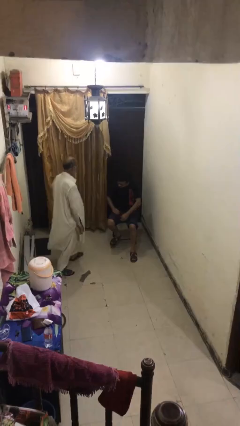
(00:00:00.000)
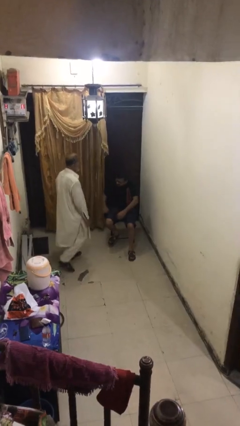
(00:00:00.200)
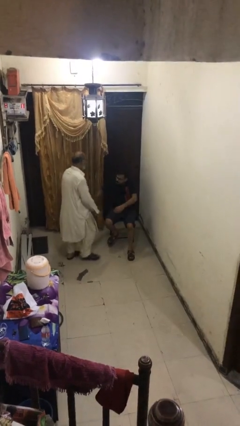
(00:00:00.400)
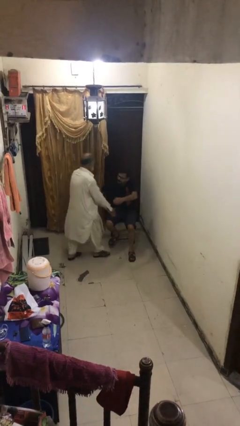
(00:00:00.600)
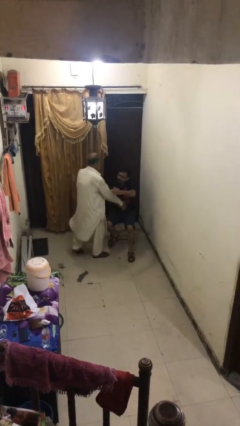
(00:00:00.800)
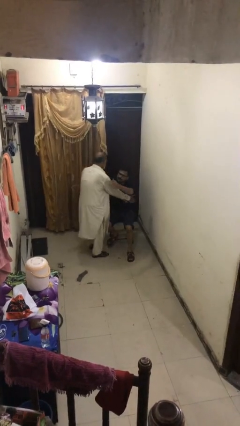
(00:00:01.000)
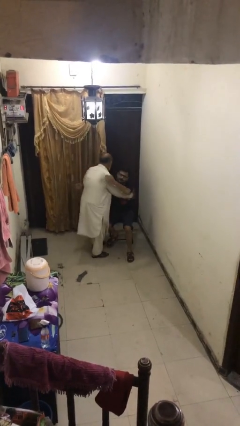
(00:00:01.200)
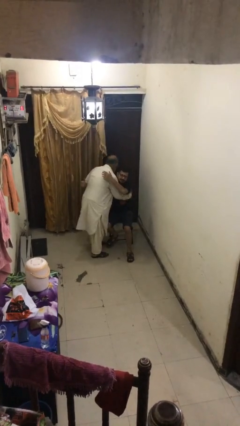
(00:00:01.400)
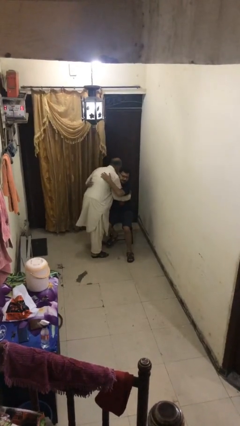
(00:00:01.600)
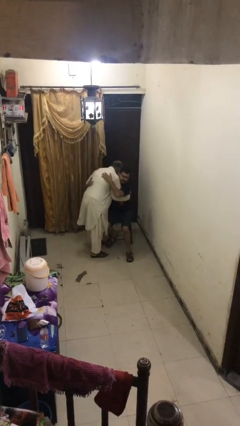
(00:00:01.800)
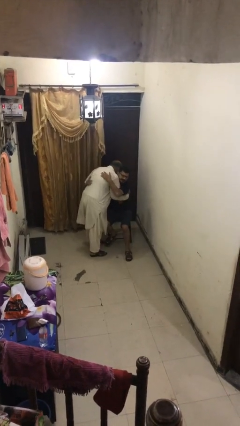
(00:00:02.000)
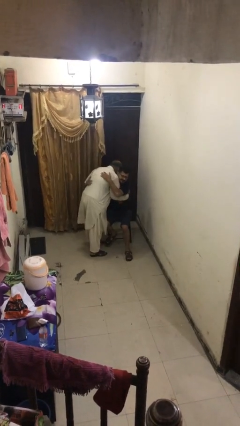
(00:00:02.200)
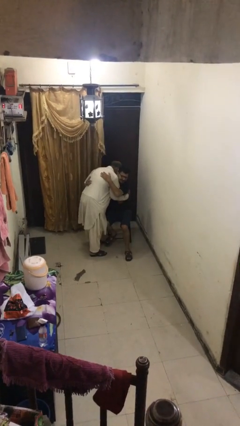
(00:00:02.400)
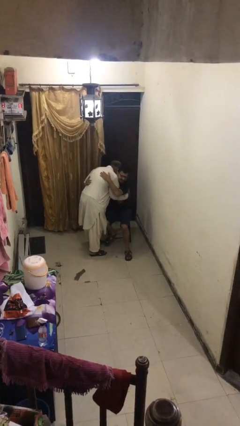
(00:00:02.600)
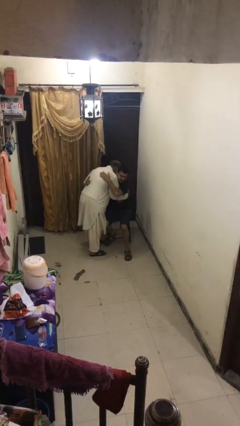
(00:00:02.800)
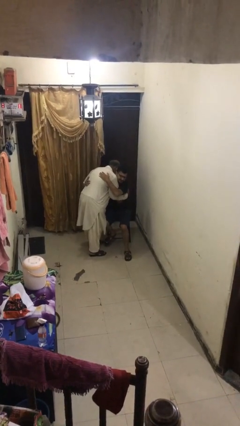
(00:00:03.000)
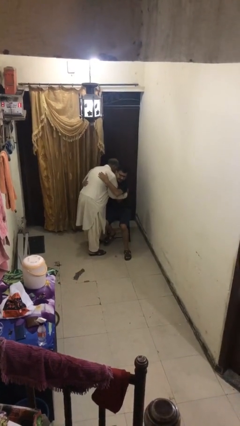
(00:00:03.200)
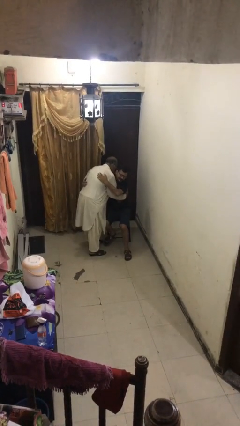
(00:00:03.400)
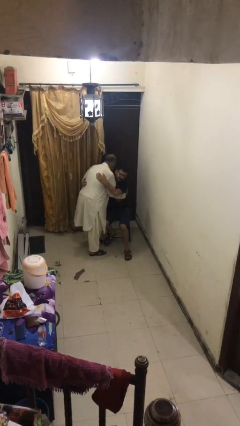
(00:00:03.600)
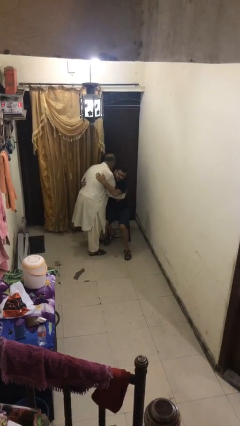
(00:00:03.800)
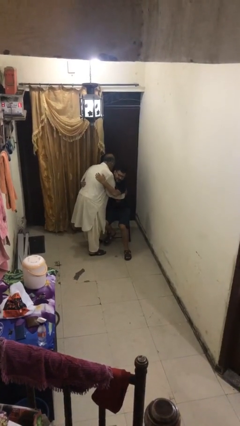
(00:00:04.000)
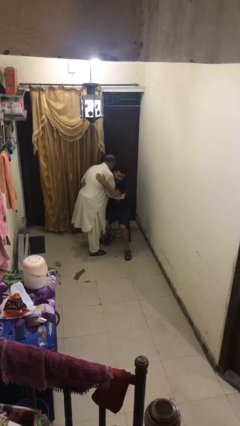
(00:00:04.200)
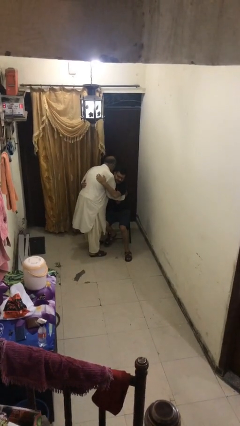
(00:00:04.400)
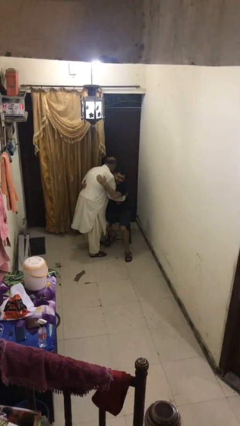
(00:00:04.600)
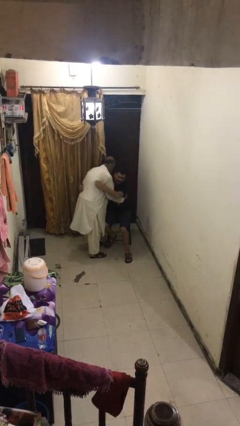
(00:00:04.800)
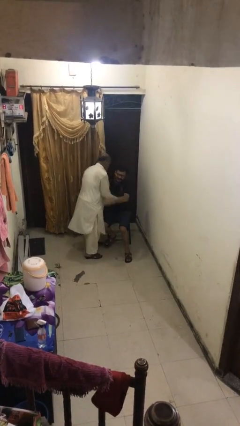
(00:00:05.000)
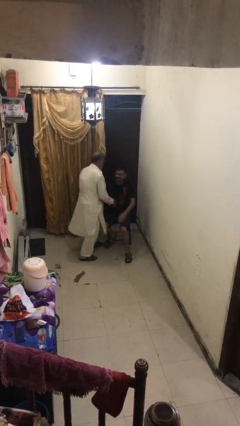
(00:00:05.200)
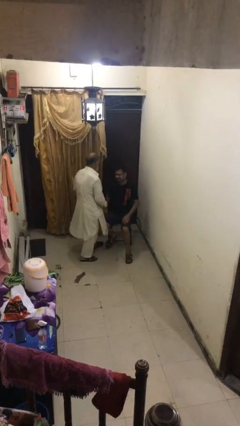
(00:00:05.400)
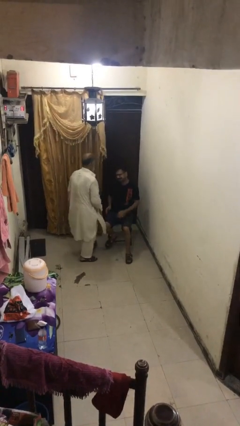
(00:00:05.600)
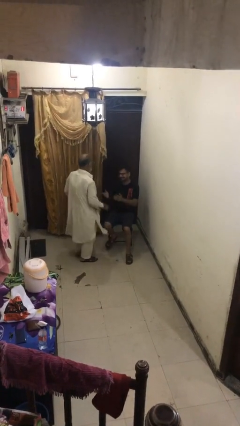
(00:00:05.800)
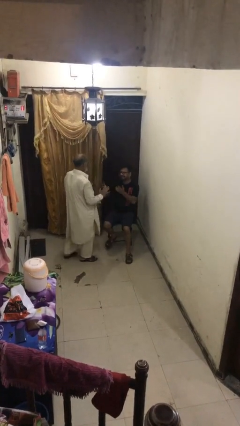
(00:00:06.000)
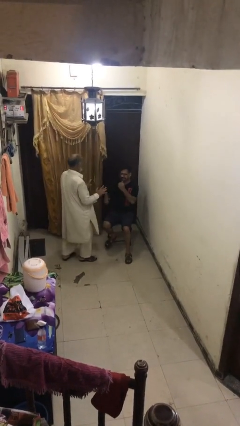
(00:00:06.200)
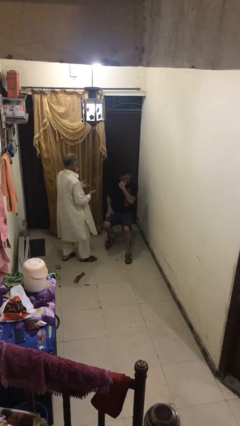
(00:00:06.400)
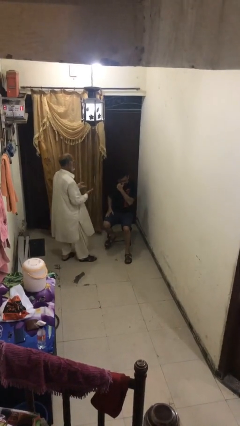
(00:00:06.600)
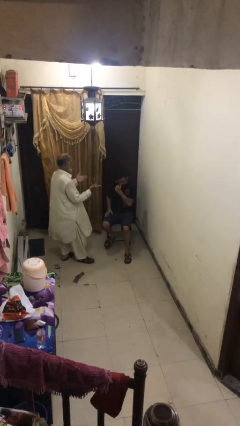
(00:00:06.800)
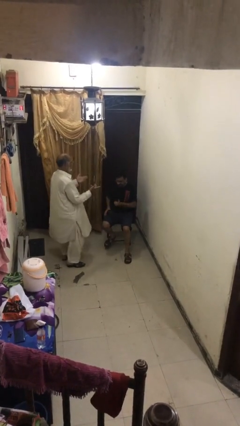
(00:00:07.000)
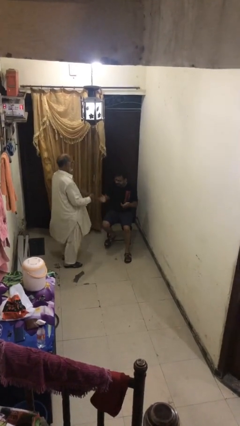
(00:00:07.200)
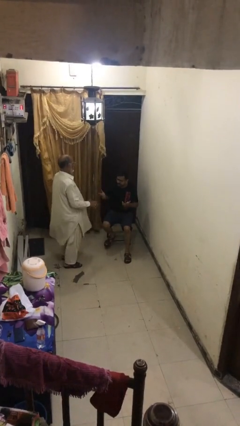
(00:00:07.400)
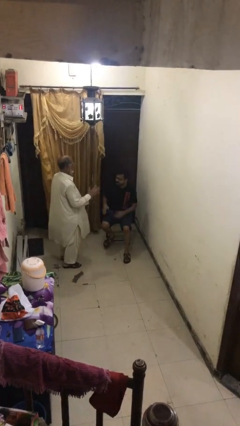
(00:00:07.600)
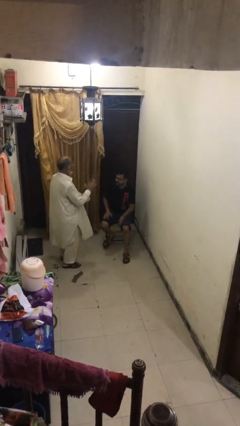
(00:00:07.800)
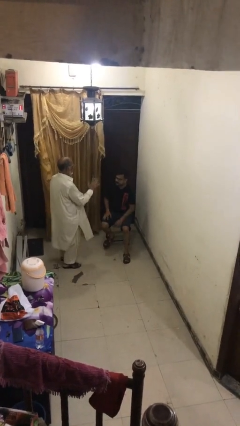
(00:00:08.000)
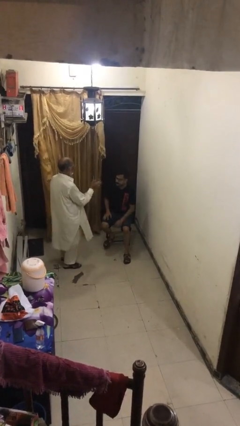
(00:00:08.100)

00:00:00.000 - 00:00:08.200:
person embraces person

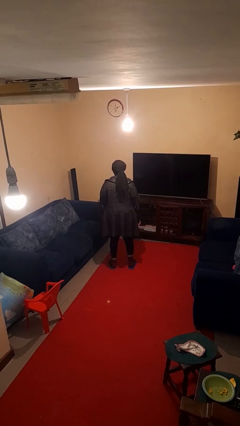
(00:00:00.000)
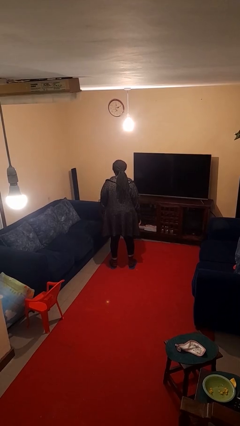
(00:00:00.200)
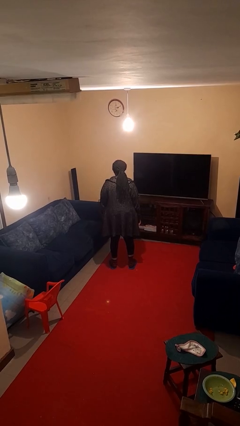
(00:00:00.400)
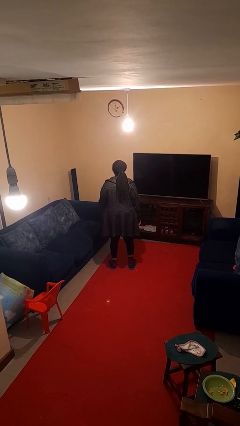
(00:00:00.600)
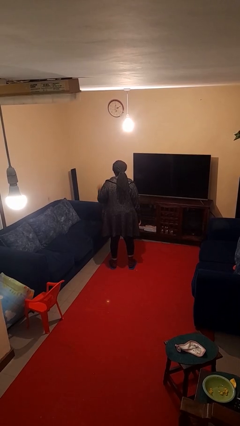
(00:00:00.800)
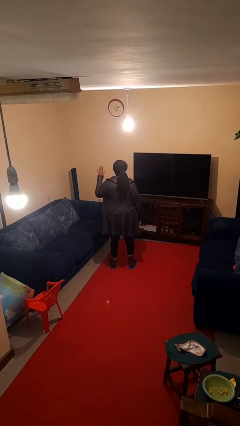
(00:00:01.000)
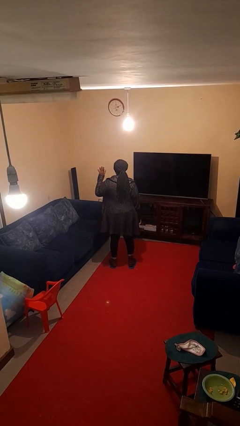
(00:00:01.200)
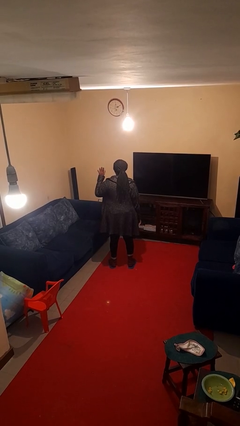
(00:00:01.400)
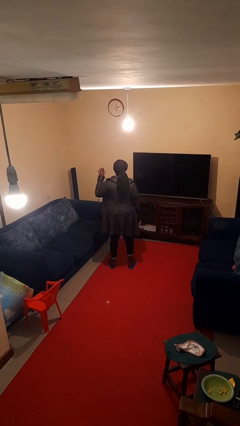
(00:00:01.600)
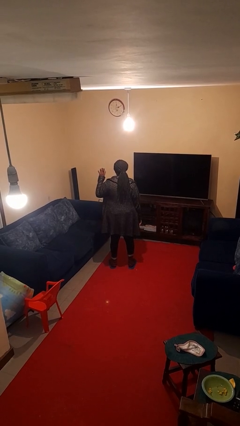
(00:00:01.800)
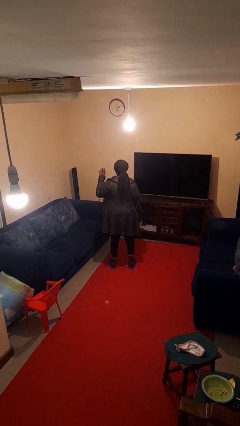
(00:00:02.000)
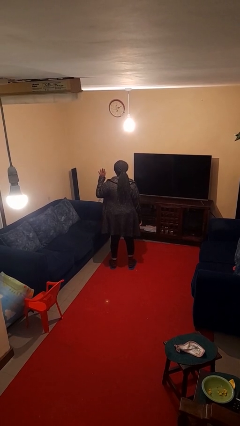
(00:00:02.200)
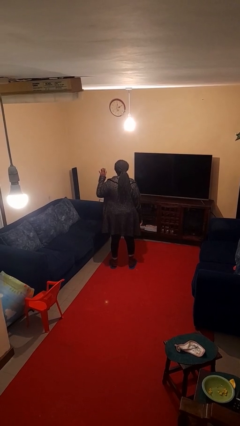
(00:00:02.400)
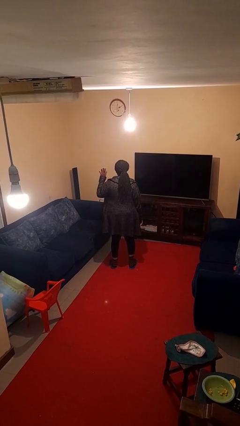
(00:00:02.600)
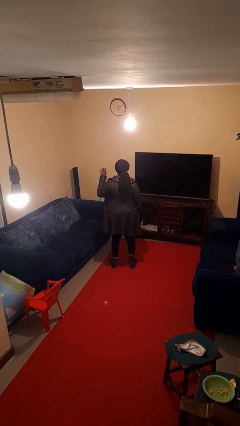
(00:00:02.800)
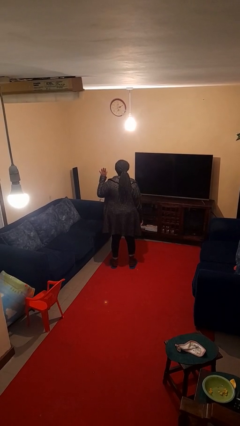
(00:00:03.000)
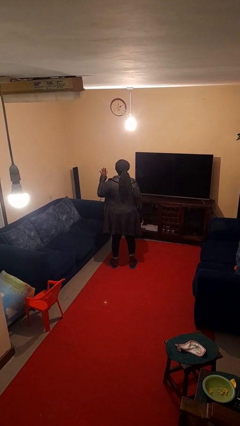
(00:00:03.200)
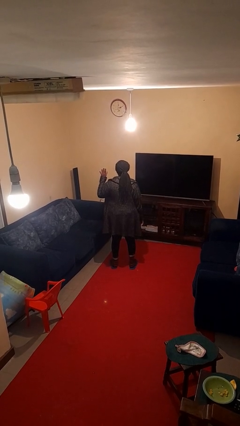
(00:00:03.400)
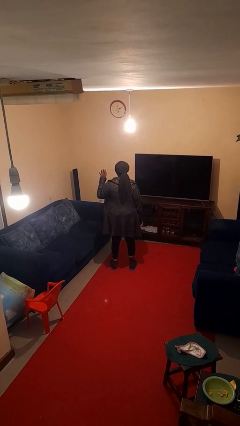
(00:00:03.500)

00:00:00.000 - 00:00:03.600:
person gestures number five

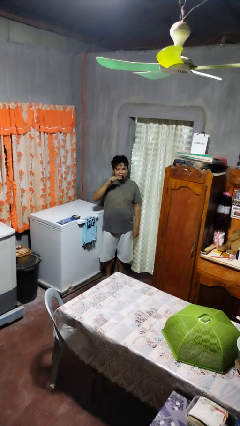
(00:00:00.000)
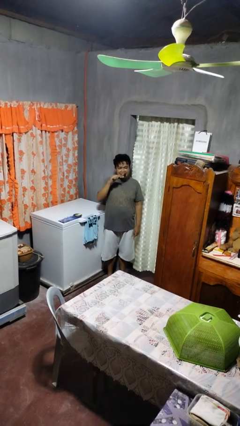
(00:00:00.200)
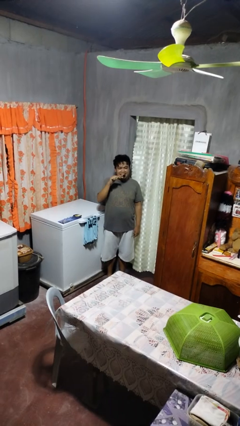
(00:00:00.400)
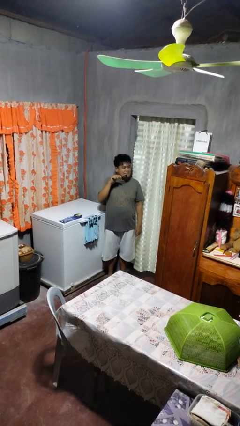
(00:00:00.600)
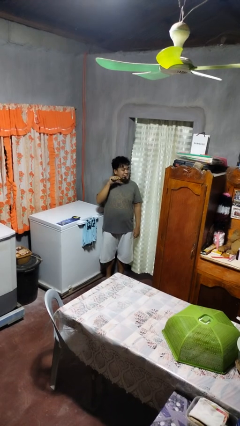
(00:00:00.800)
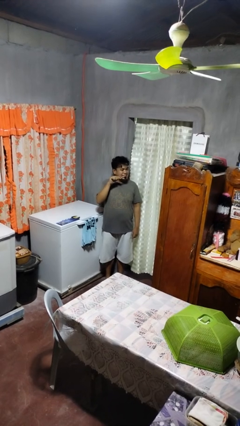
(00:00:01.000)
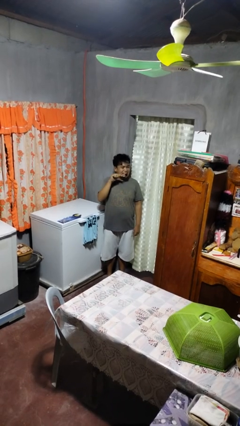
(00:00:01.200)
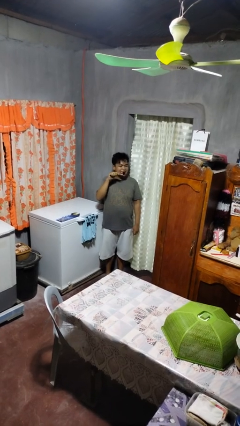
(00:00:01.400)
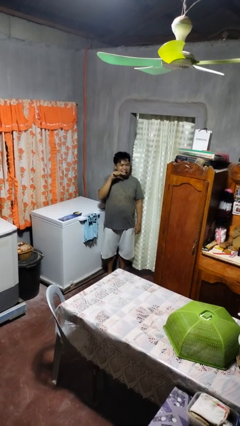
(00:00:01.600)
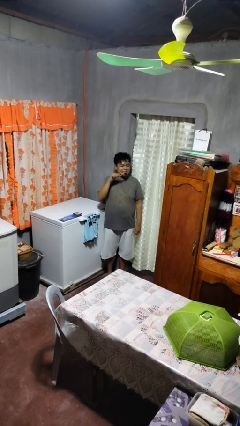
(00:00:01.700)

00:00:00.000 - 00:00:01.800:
person brushes teeth

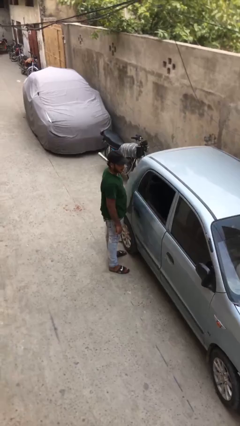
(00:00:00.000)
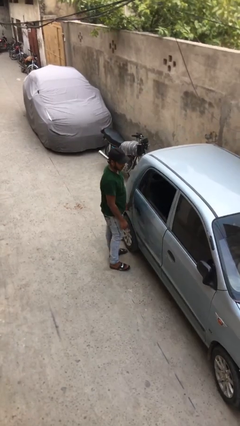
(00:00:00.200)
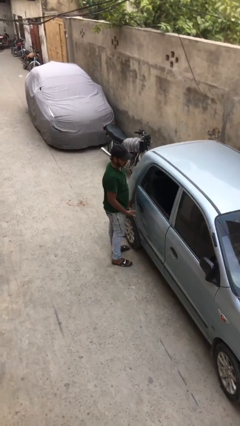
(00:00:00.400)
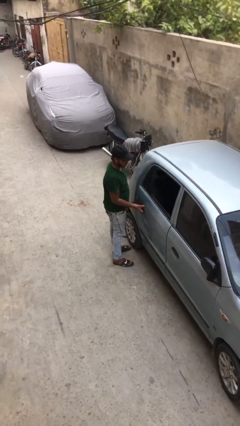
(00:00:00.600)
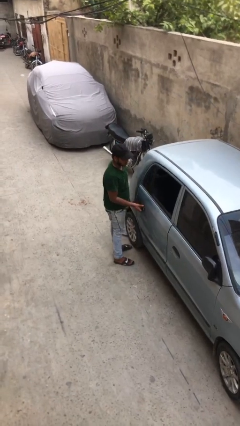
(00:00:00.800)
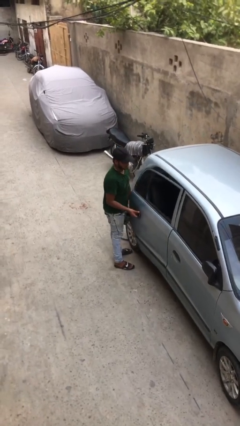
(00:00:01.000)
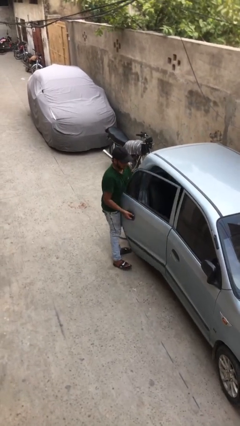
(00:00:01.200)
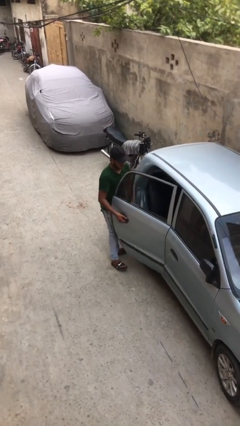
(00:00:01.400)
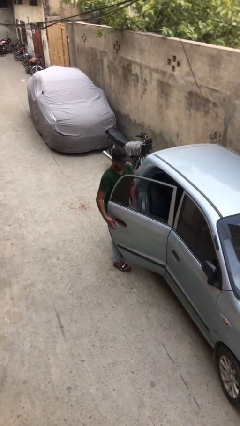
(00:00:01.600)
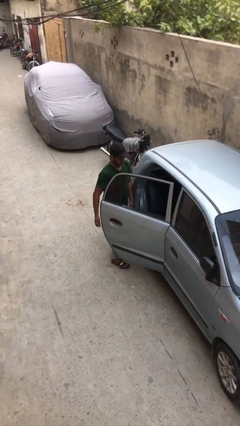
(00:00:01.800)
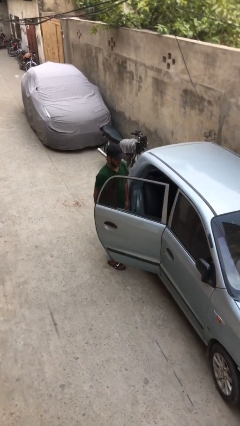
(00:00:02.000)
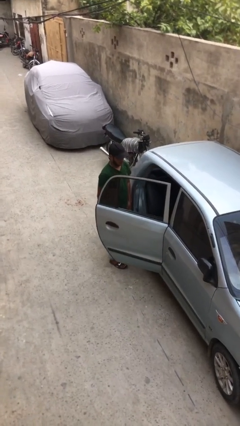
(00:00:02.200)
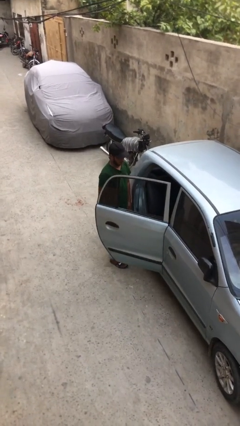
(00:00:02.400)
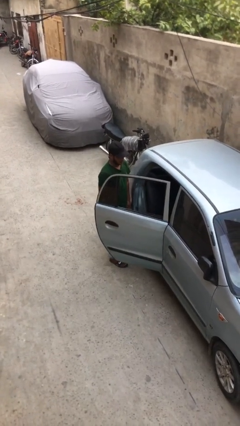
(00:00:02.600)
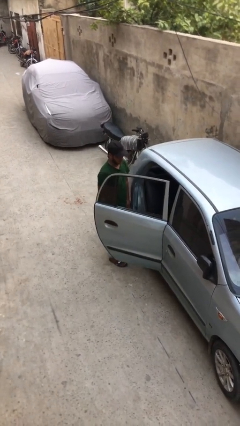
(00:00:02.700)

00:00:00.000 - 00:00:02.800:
person opens car door

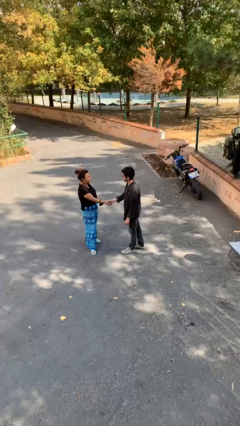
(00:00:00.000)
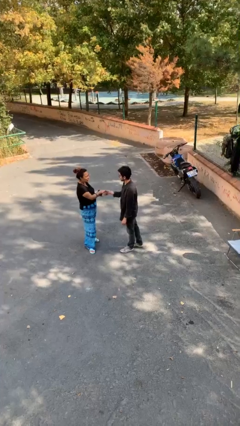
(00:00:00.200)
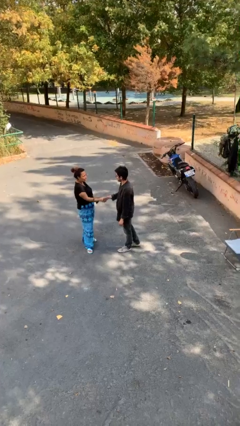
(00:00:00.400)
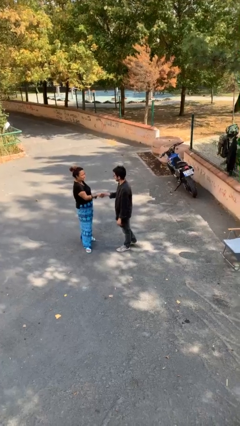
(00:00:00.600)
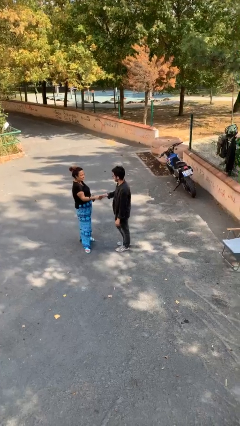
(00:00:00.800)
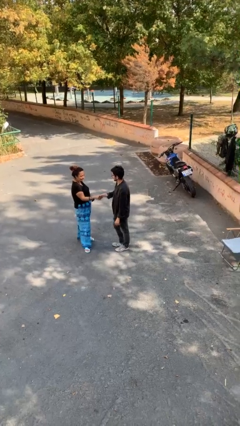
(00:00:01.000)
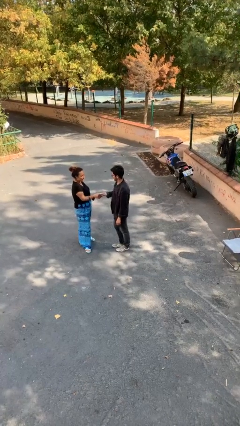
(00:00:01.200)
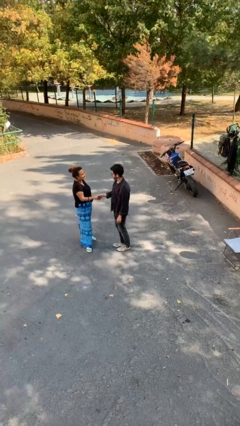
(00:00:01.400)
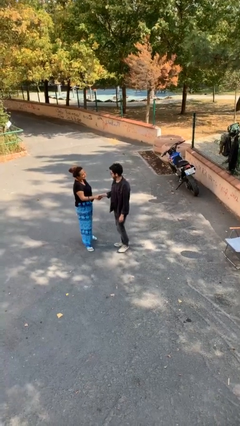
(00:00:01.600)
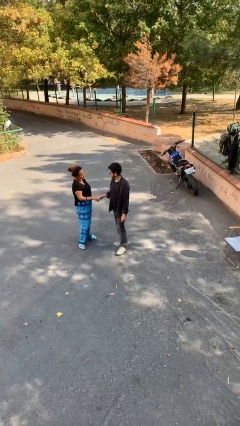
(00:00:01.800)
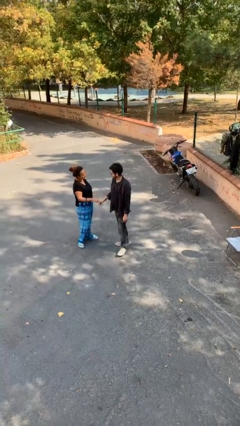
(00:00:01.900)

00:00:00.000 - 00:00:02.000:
person shakes hand
